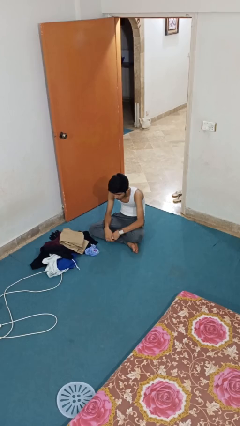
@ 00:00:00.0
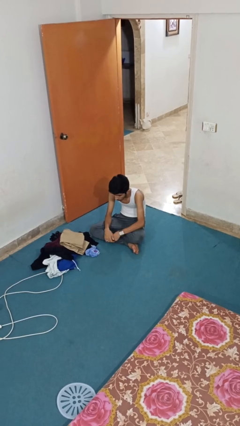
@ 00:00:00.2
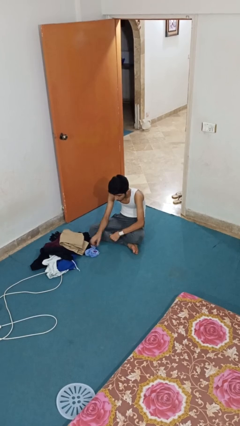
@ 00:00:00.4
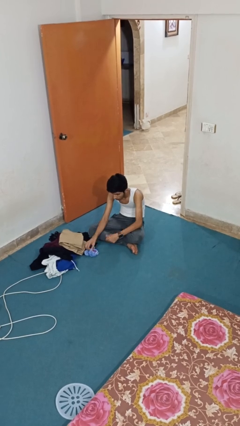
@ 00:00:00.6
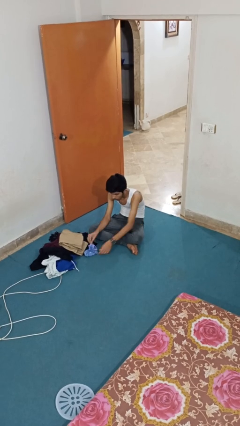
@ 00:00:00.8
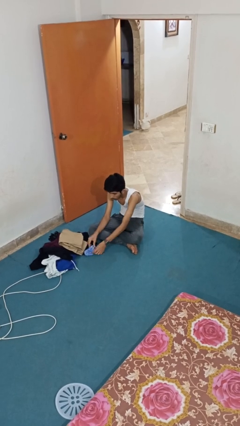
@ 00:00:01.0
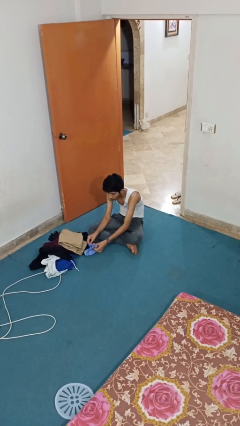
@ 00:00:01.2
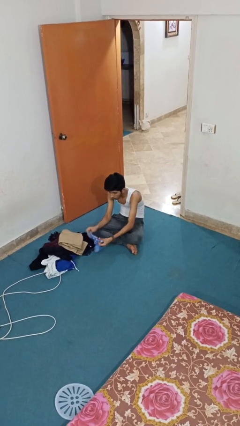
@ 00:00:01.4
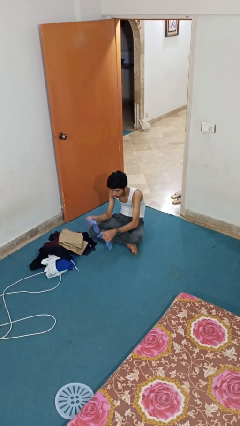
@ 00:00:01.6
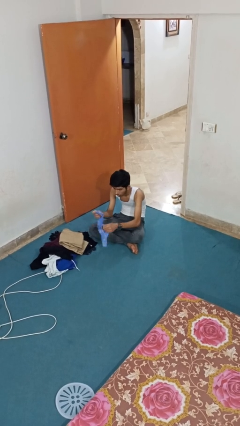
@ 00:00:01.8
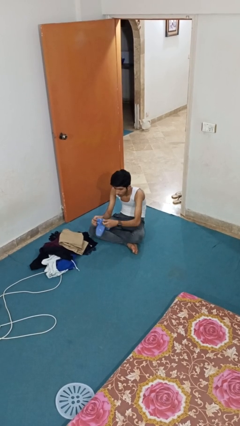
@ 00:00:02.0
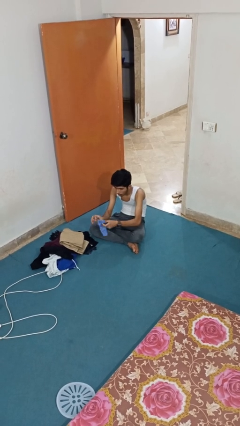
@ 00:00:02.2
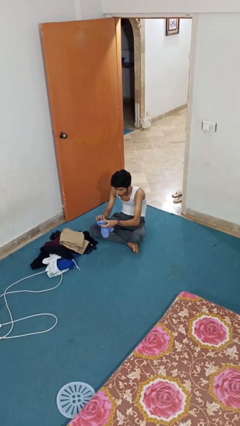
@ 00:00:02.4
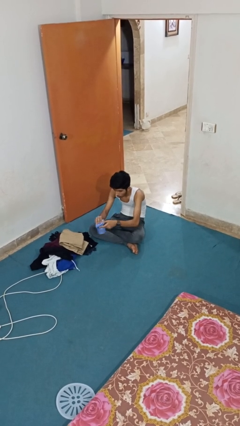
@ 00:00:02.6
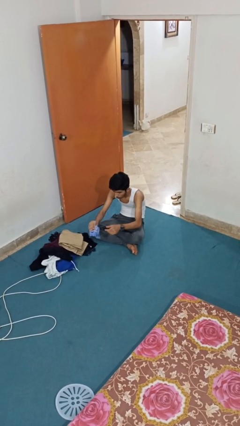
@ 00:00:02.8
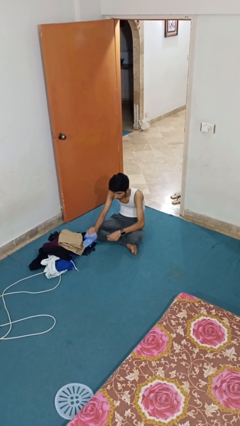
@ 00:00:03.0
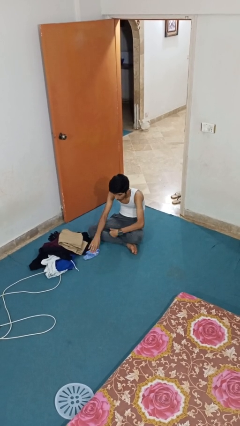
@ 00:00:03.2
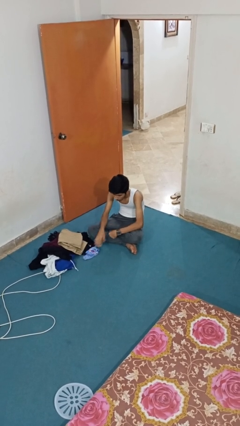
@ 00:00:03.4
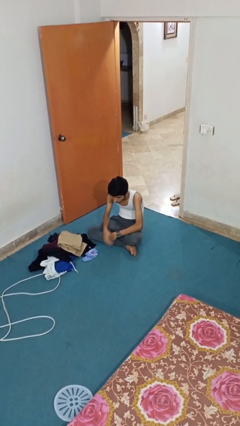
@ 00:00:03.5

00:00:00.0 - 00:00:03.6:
person folds socks

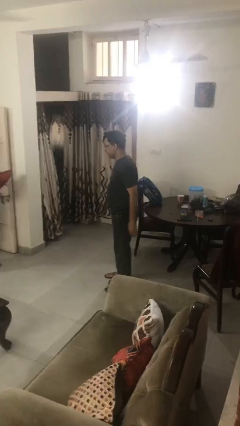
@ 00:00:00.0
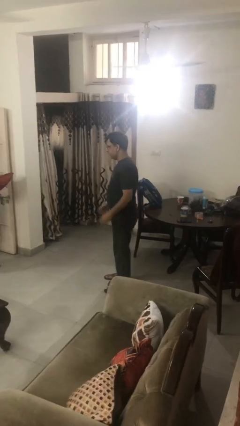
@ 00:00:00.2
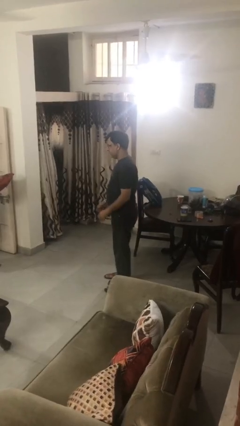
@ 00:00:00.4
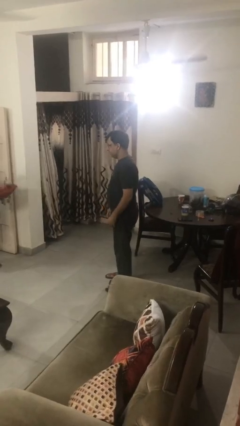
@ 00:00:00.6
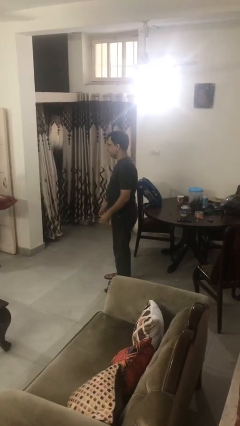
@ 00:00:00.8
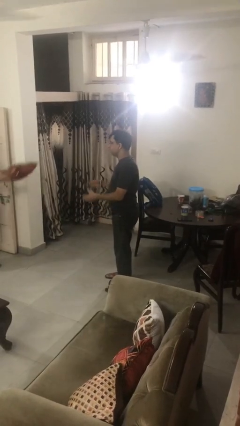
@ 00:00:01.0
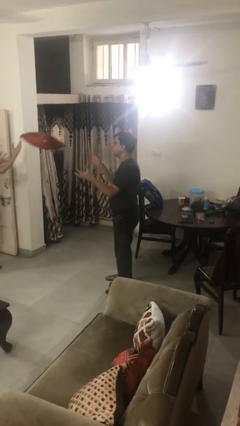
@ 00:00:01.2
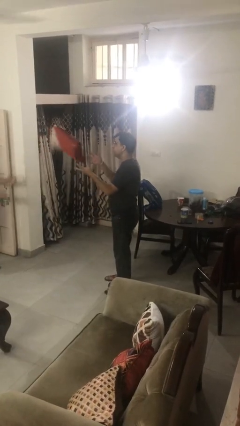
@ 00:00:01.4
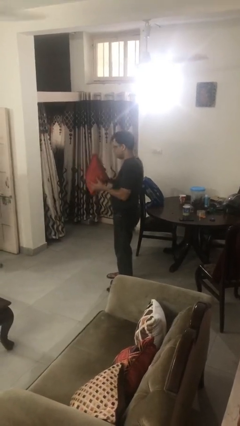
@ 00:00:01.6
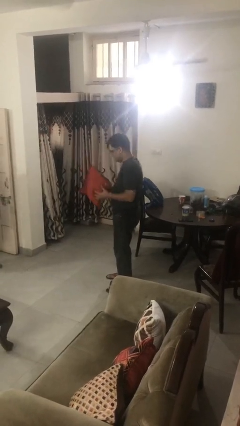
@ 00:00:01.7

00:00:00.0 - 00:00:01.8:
person catches object from person

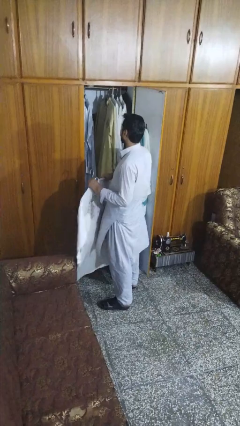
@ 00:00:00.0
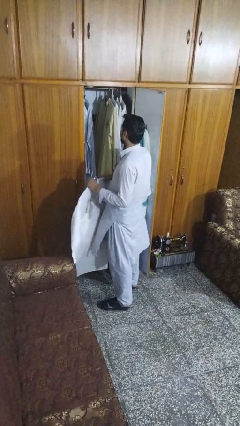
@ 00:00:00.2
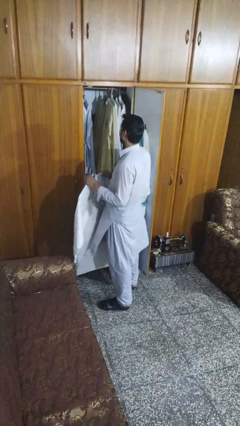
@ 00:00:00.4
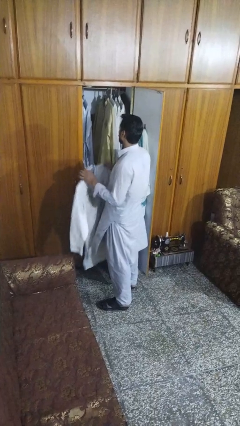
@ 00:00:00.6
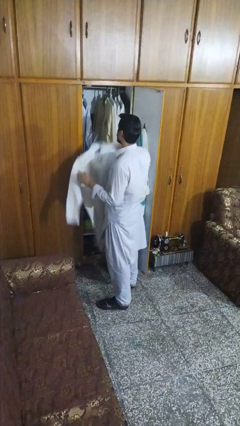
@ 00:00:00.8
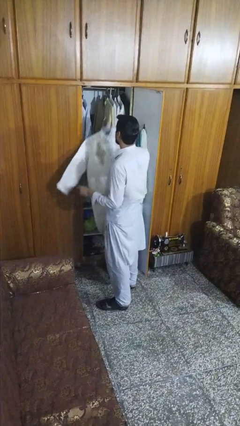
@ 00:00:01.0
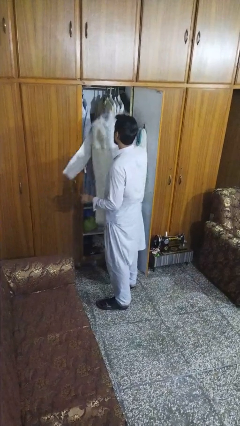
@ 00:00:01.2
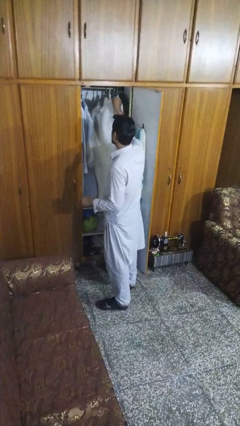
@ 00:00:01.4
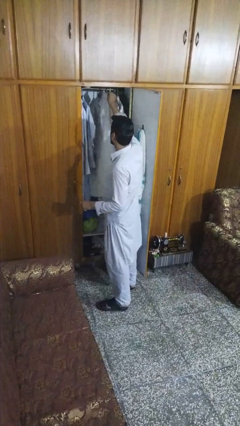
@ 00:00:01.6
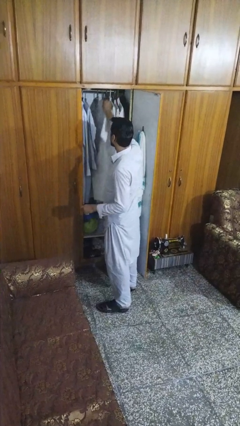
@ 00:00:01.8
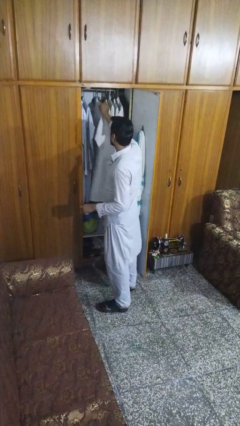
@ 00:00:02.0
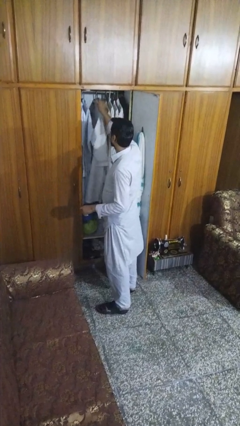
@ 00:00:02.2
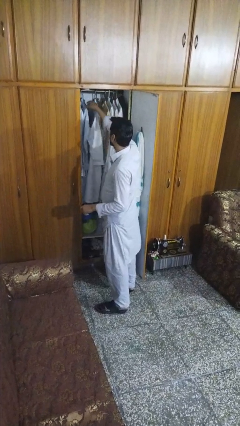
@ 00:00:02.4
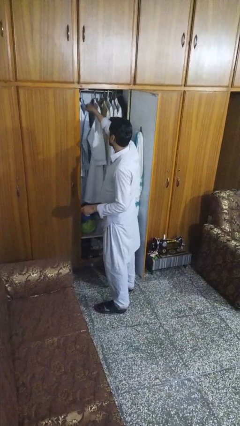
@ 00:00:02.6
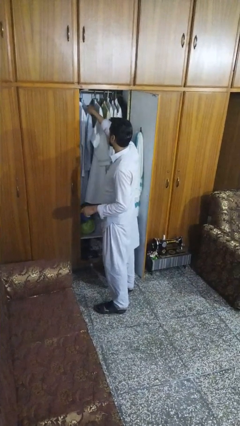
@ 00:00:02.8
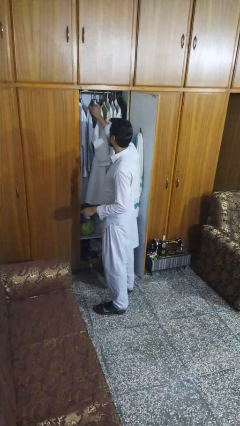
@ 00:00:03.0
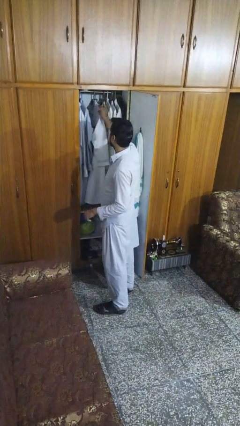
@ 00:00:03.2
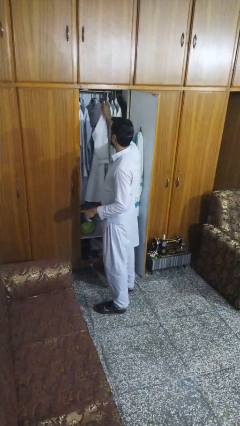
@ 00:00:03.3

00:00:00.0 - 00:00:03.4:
person puts clothes into dresser

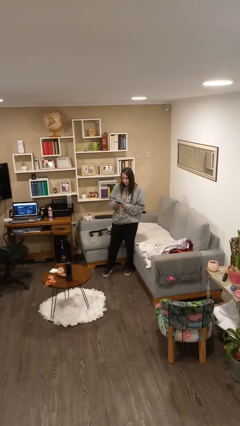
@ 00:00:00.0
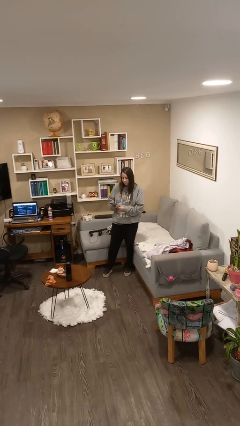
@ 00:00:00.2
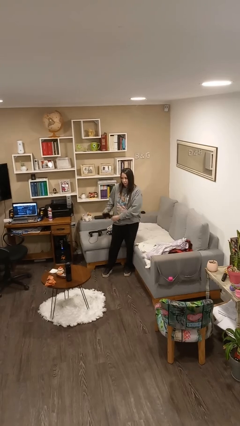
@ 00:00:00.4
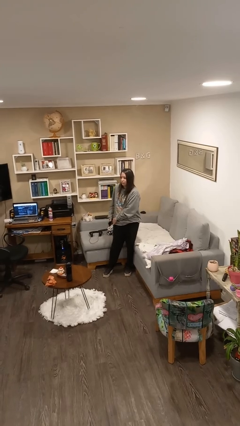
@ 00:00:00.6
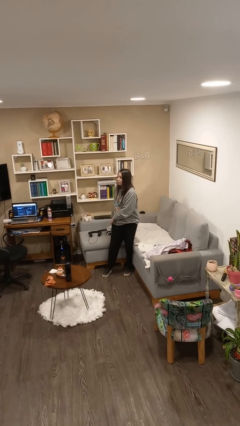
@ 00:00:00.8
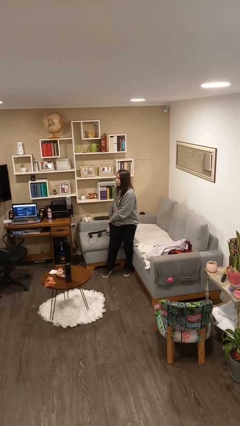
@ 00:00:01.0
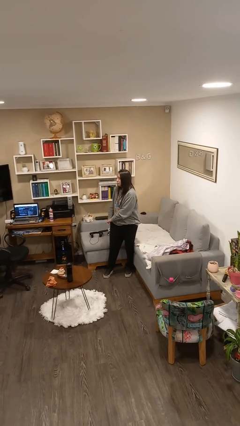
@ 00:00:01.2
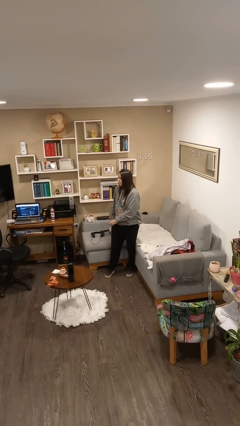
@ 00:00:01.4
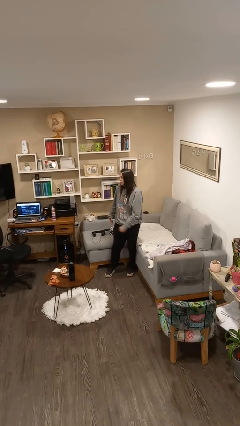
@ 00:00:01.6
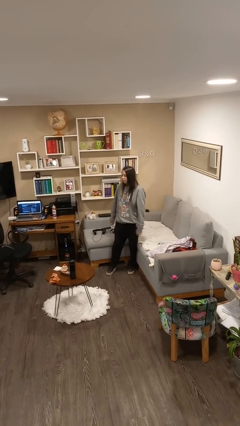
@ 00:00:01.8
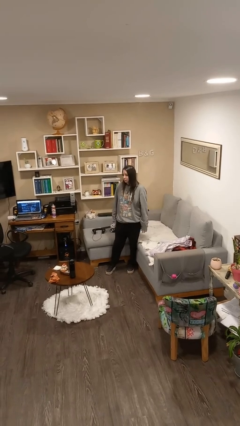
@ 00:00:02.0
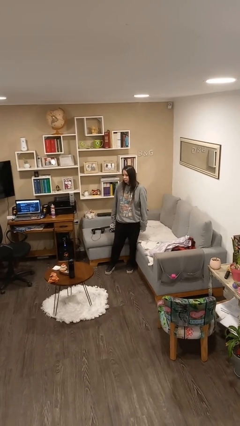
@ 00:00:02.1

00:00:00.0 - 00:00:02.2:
person puts phone into pocket

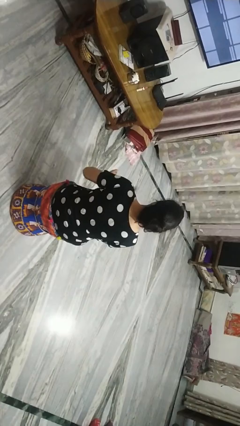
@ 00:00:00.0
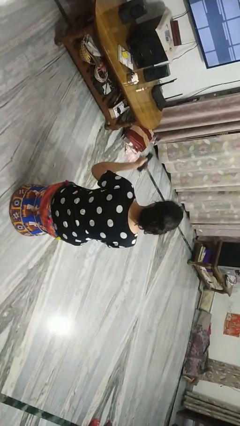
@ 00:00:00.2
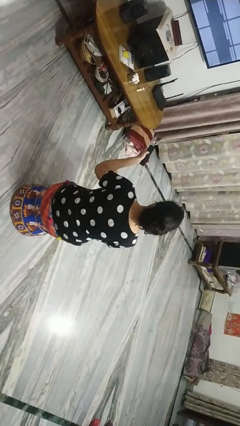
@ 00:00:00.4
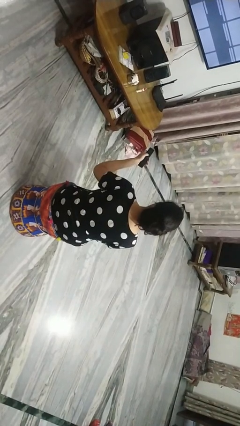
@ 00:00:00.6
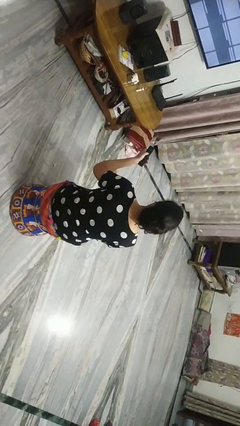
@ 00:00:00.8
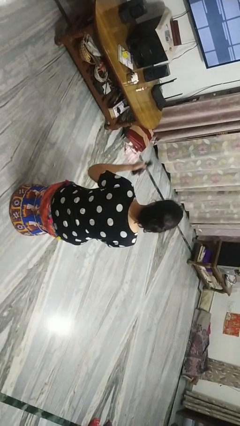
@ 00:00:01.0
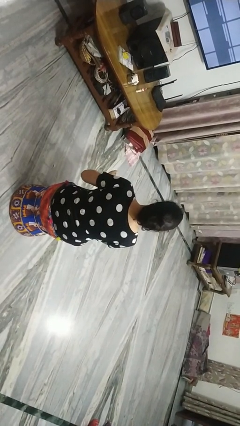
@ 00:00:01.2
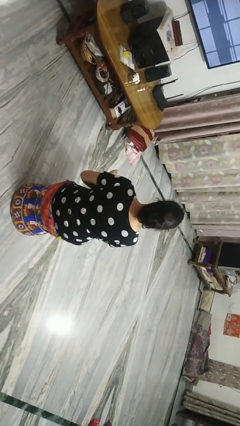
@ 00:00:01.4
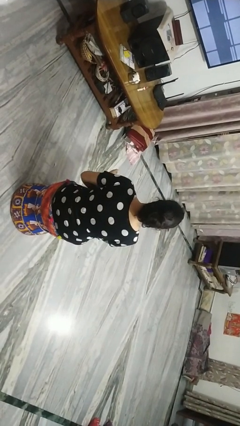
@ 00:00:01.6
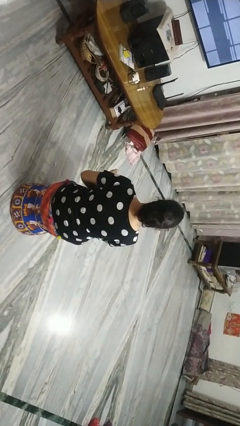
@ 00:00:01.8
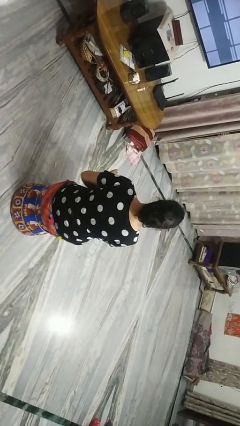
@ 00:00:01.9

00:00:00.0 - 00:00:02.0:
person uses television remote

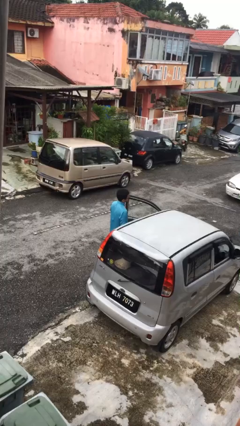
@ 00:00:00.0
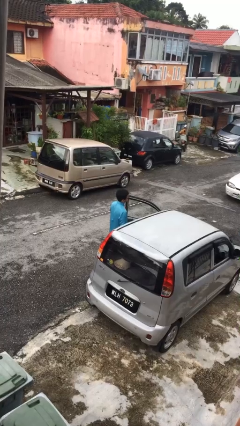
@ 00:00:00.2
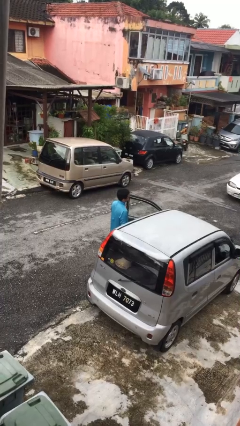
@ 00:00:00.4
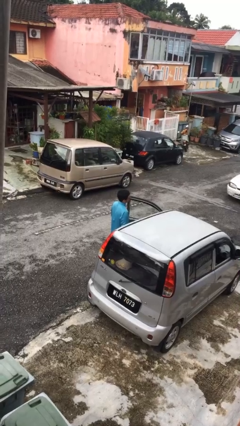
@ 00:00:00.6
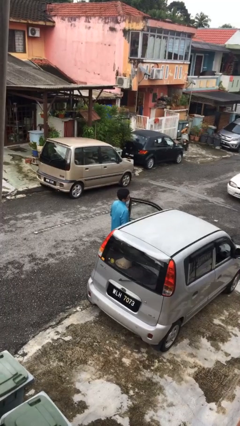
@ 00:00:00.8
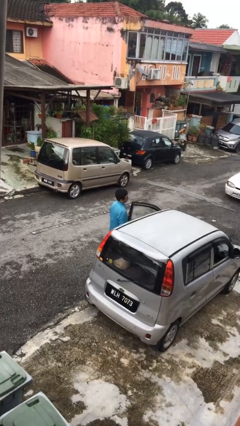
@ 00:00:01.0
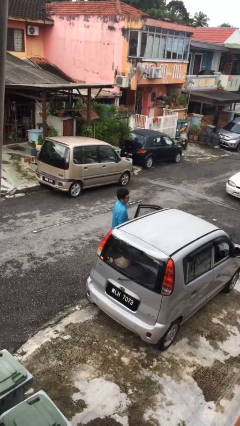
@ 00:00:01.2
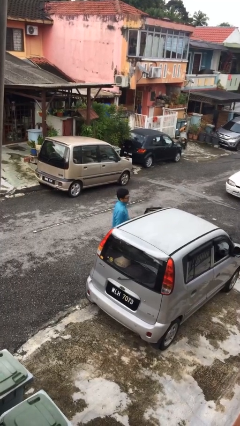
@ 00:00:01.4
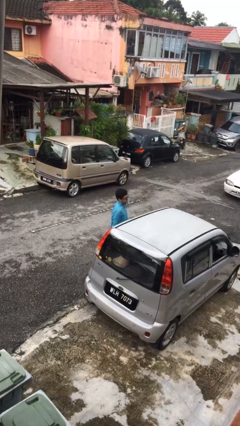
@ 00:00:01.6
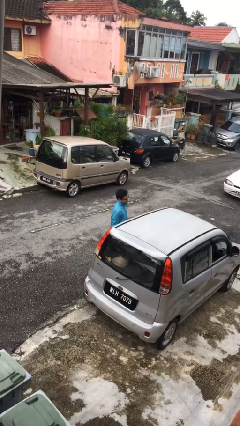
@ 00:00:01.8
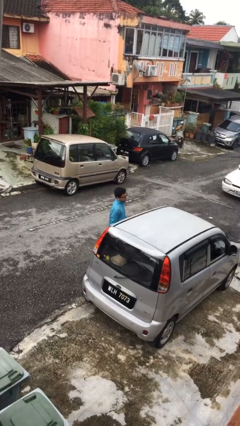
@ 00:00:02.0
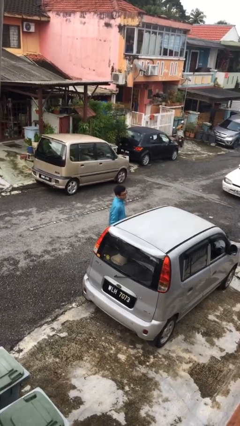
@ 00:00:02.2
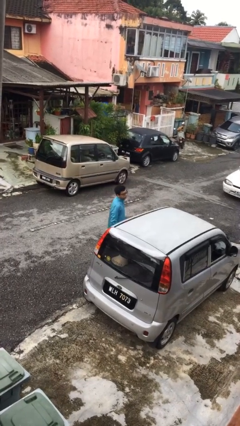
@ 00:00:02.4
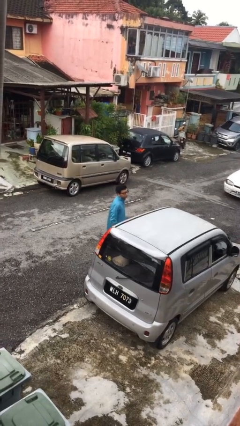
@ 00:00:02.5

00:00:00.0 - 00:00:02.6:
person closes car door

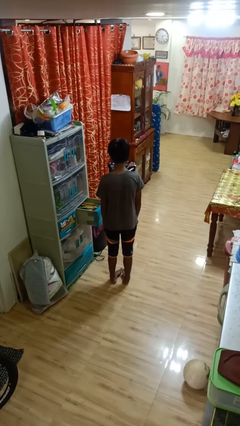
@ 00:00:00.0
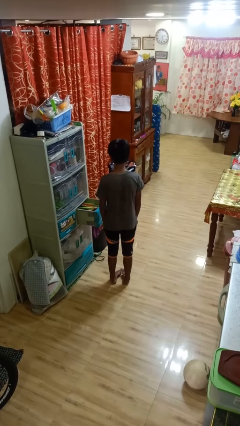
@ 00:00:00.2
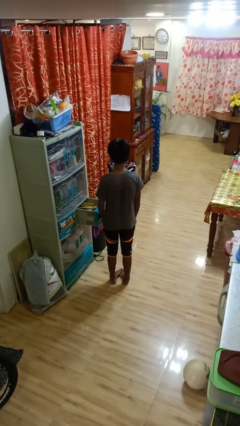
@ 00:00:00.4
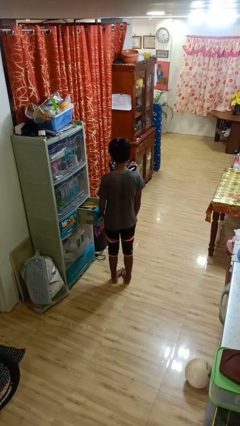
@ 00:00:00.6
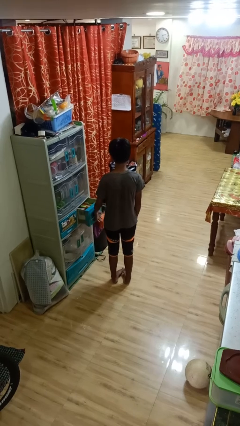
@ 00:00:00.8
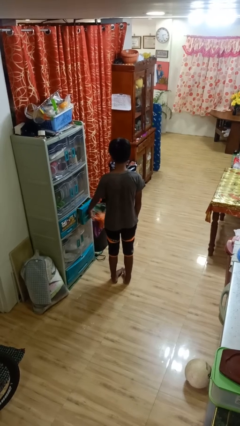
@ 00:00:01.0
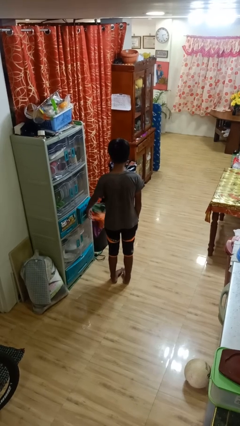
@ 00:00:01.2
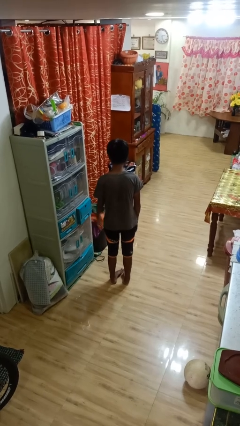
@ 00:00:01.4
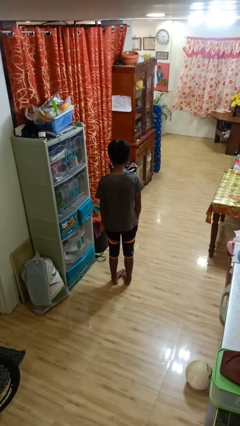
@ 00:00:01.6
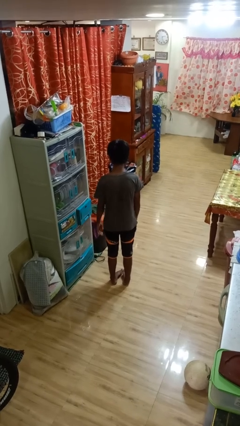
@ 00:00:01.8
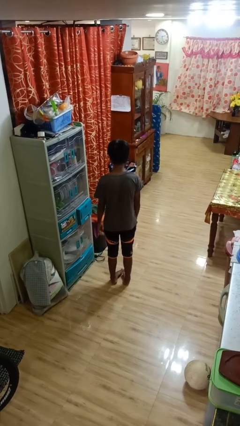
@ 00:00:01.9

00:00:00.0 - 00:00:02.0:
person closes kitchen drawer
